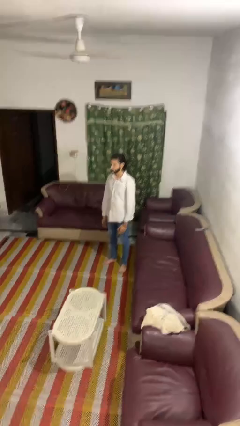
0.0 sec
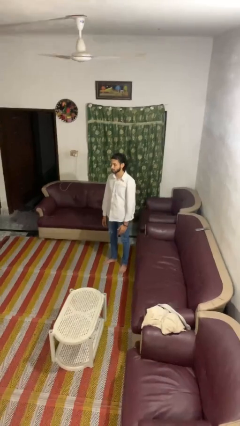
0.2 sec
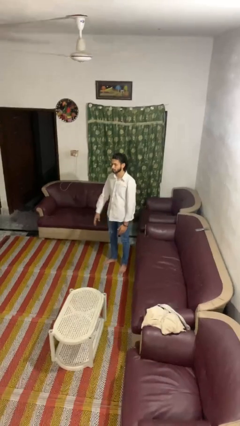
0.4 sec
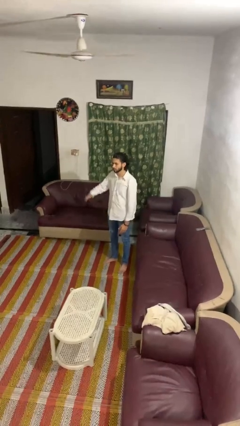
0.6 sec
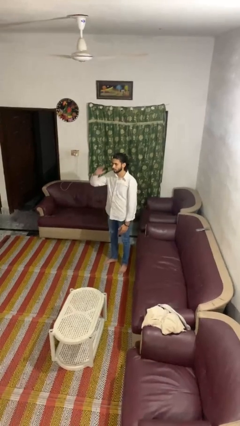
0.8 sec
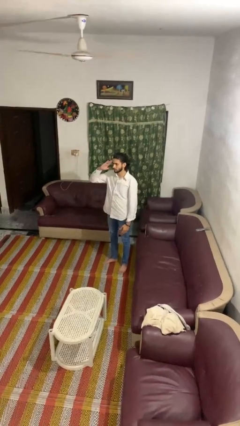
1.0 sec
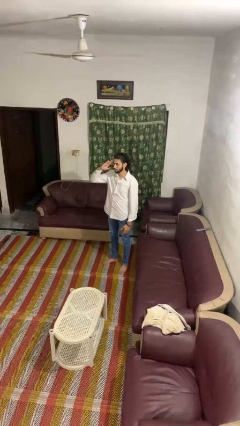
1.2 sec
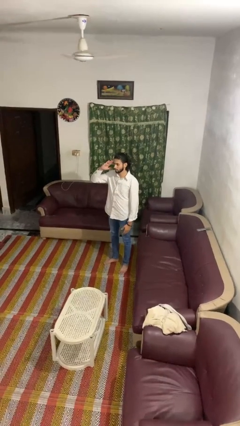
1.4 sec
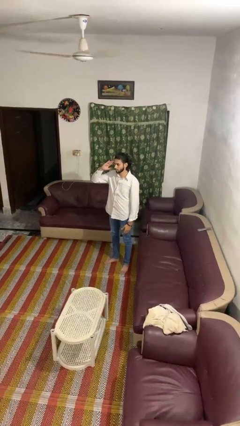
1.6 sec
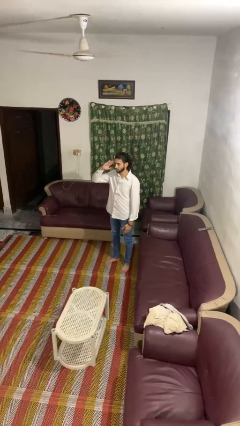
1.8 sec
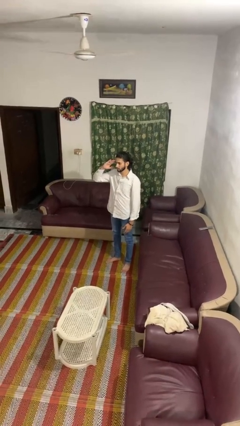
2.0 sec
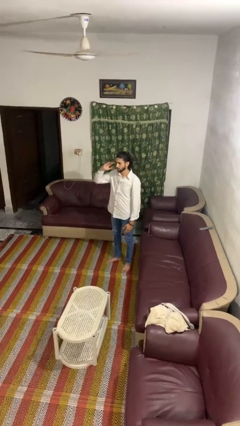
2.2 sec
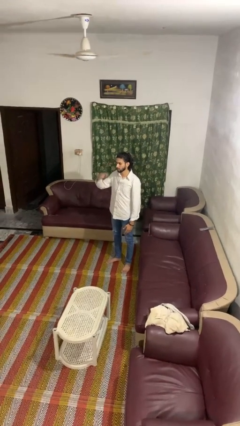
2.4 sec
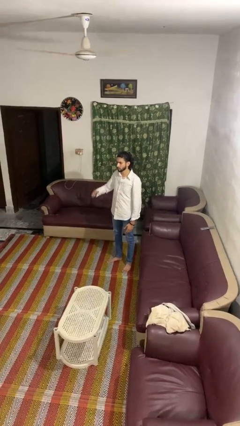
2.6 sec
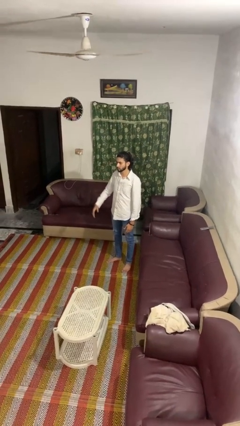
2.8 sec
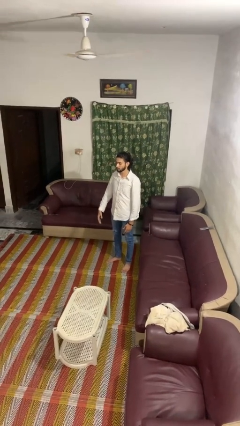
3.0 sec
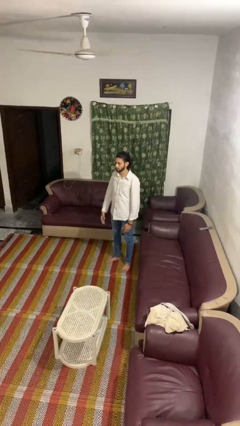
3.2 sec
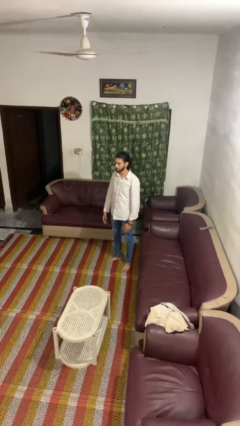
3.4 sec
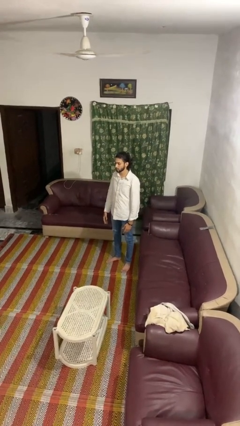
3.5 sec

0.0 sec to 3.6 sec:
person salutes

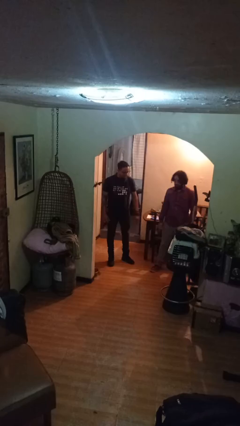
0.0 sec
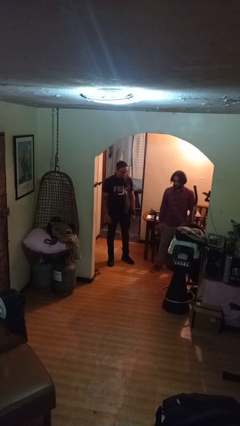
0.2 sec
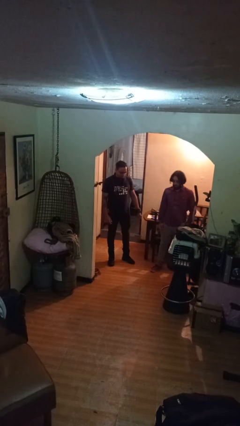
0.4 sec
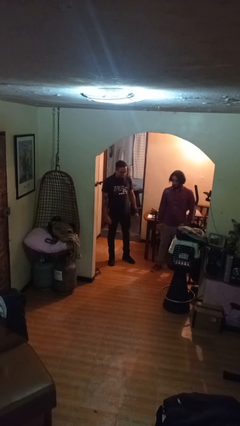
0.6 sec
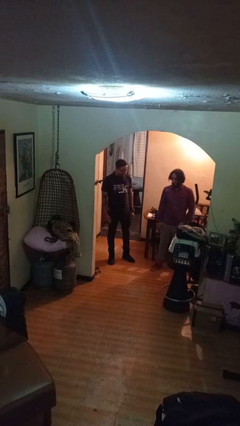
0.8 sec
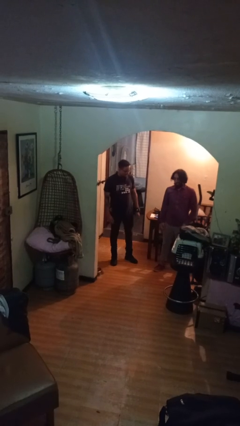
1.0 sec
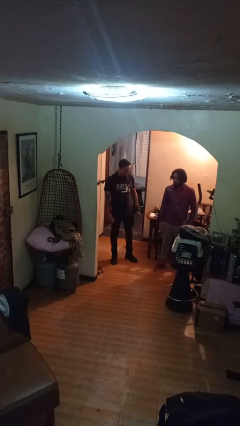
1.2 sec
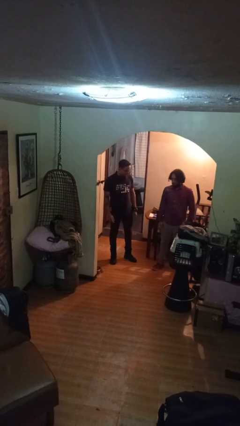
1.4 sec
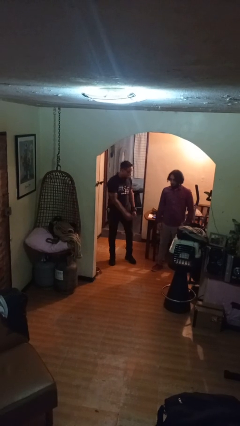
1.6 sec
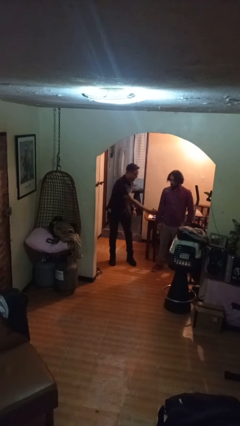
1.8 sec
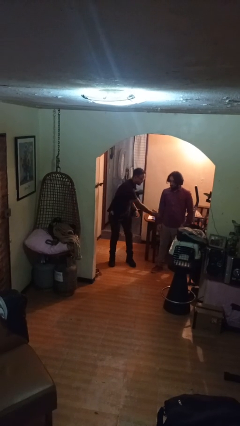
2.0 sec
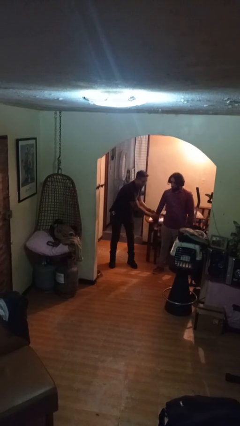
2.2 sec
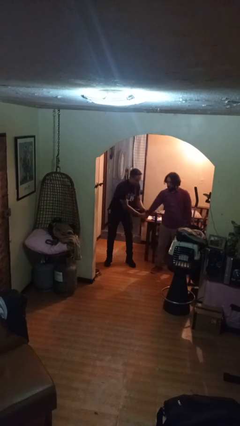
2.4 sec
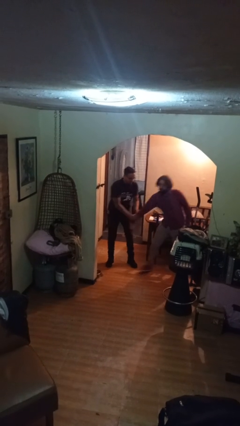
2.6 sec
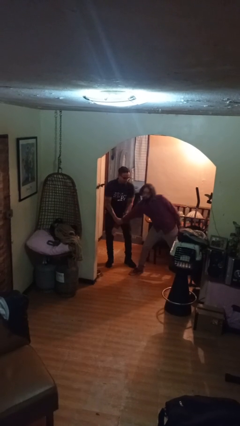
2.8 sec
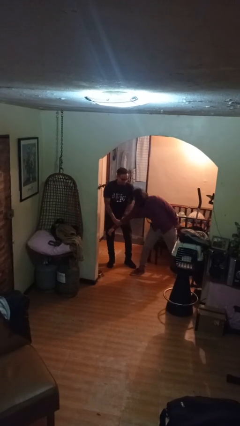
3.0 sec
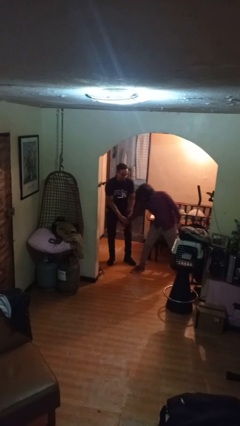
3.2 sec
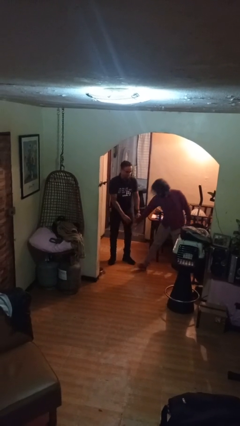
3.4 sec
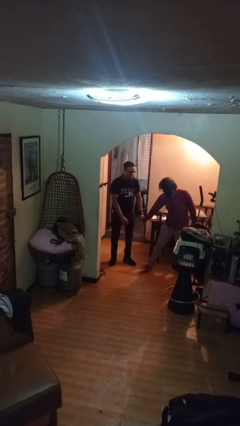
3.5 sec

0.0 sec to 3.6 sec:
person grabs person by forearm

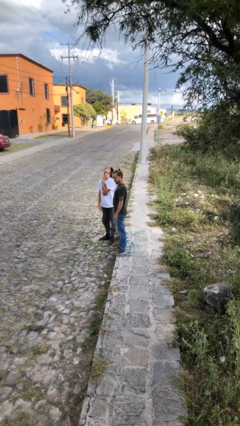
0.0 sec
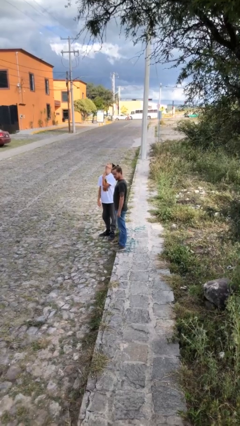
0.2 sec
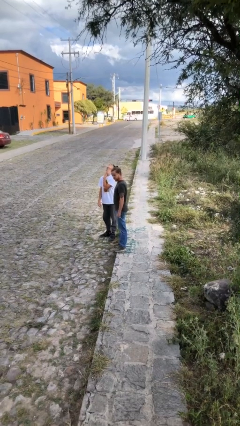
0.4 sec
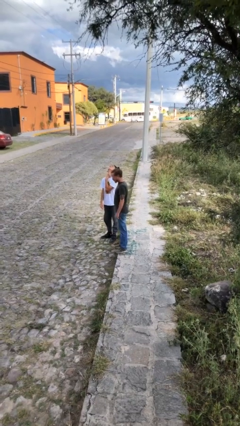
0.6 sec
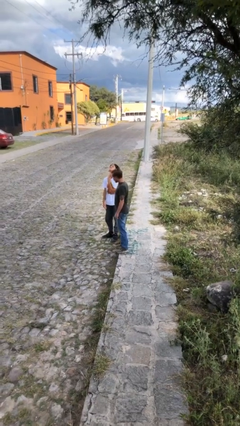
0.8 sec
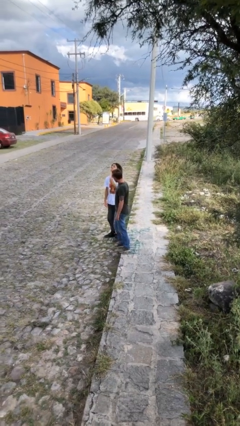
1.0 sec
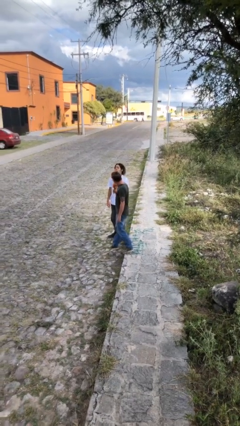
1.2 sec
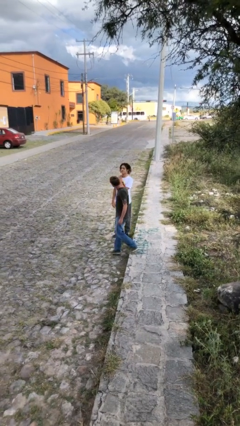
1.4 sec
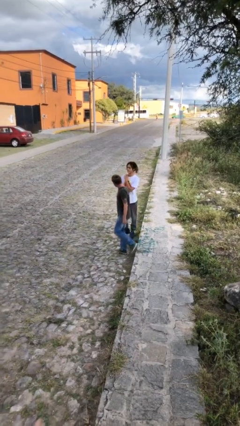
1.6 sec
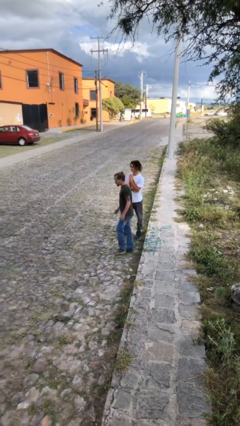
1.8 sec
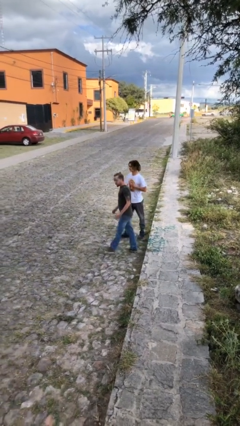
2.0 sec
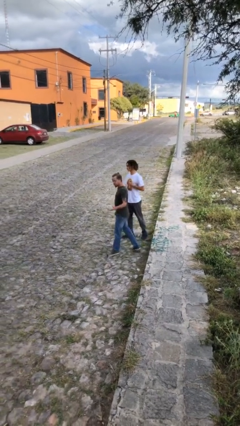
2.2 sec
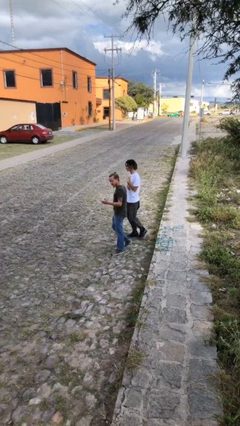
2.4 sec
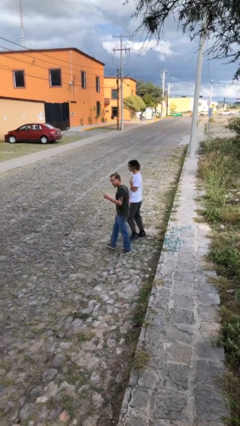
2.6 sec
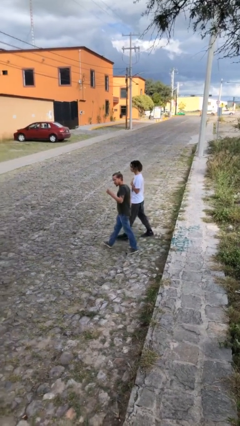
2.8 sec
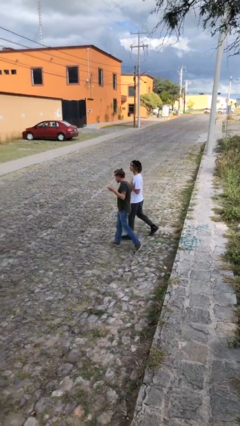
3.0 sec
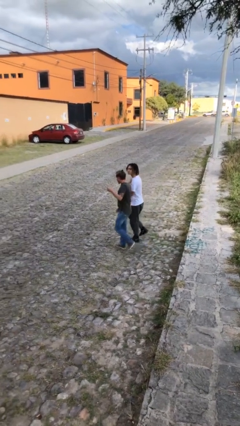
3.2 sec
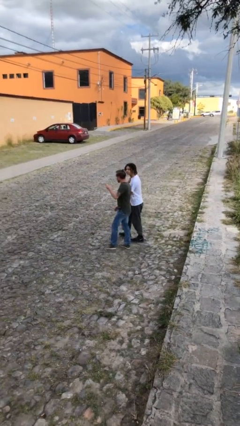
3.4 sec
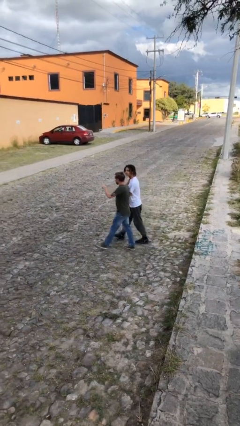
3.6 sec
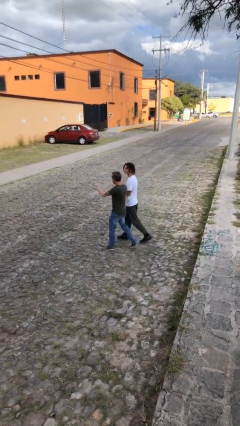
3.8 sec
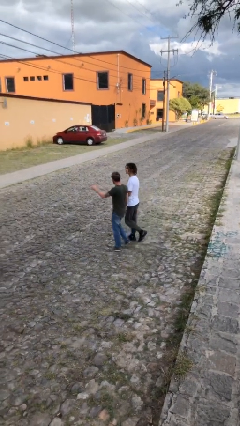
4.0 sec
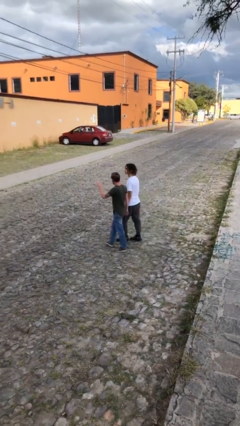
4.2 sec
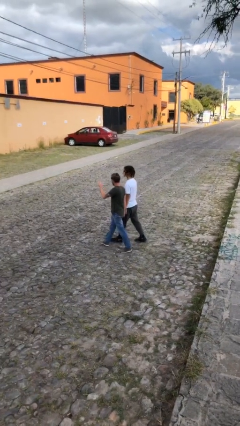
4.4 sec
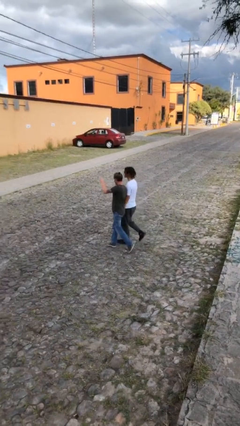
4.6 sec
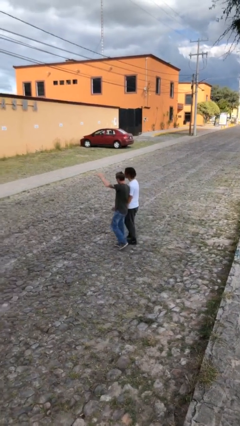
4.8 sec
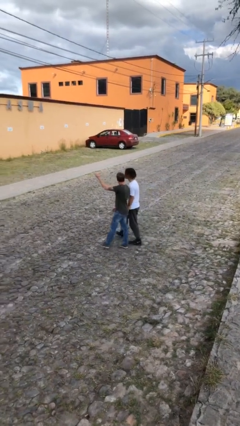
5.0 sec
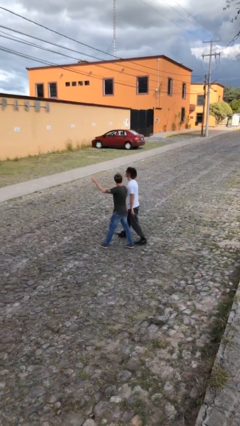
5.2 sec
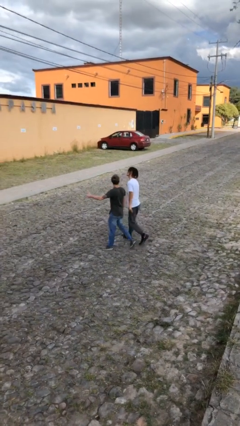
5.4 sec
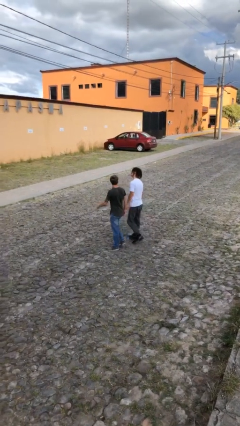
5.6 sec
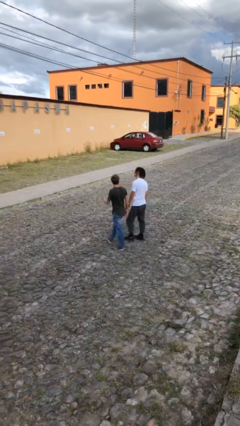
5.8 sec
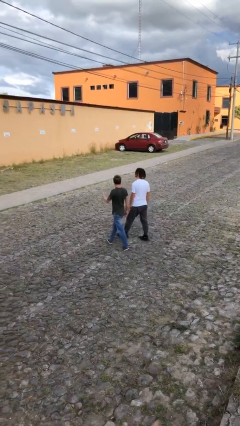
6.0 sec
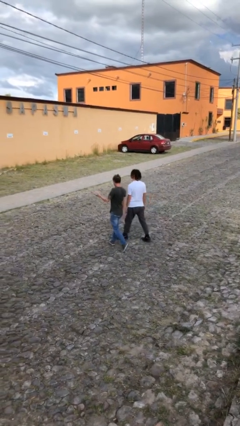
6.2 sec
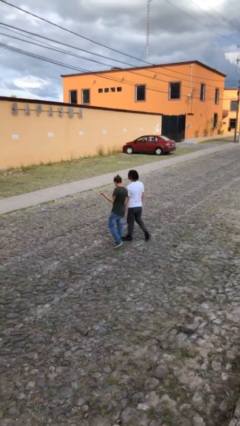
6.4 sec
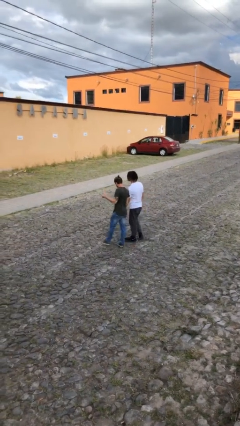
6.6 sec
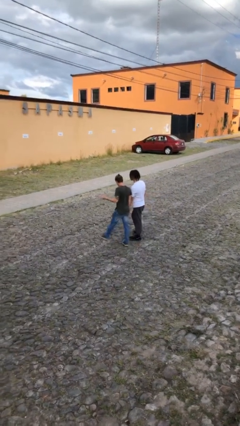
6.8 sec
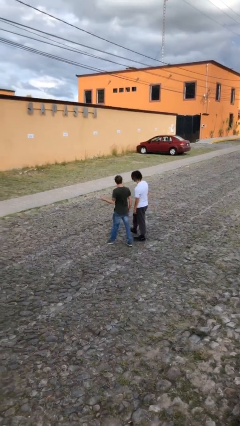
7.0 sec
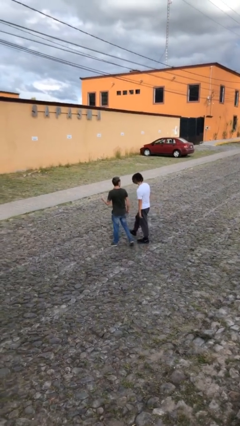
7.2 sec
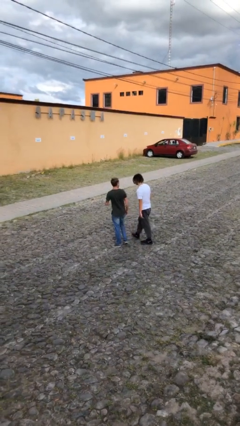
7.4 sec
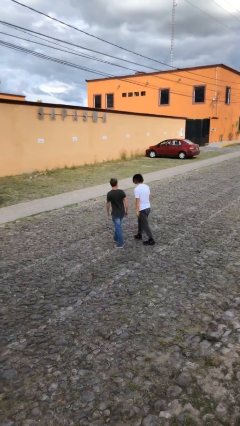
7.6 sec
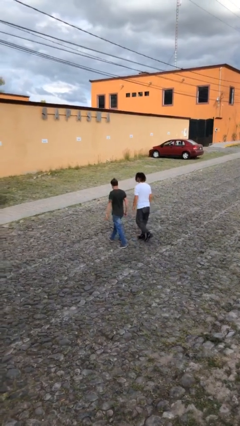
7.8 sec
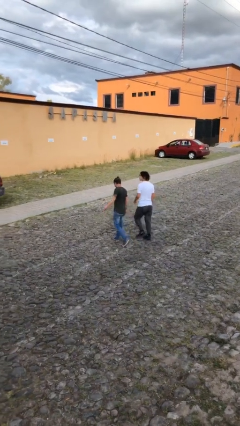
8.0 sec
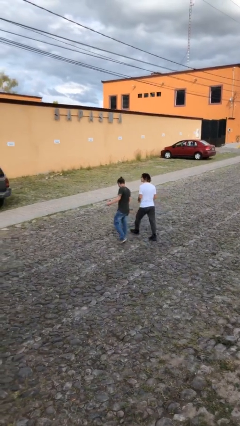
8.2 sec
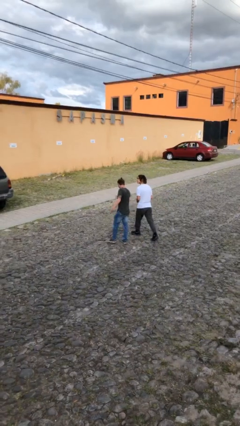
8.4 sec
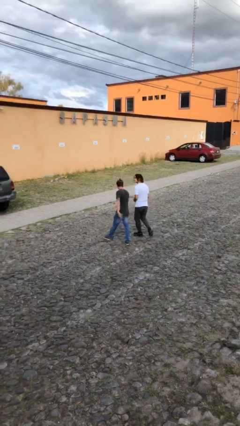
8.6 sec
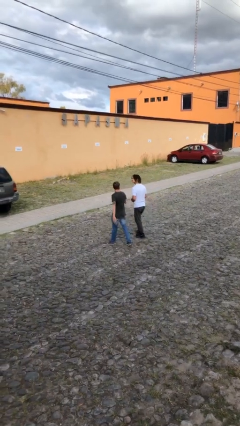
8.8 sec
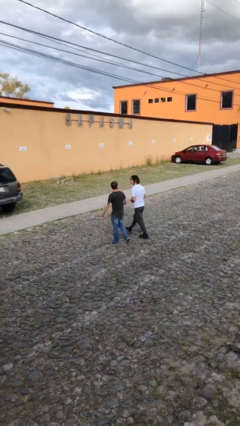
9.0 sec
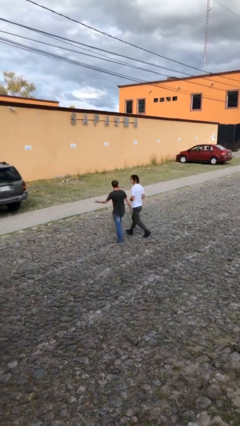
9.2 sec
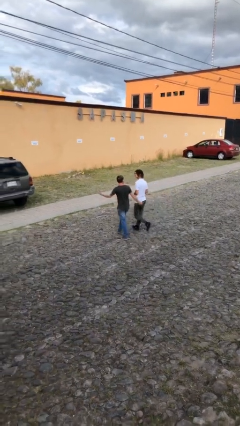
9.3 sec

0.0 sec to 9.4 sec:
person talks to person

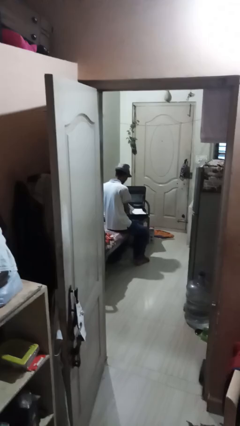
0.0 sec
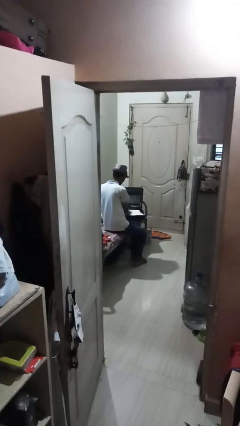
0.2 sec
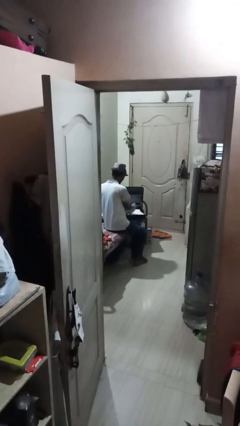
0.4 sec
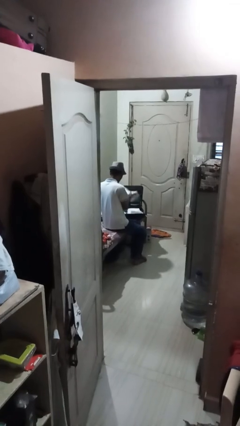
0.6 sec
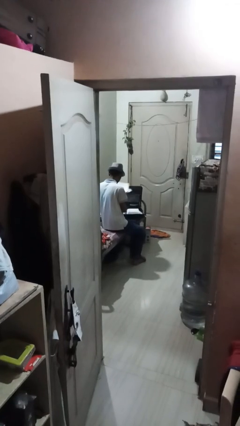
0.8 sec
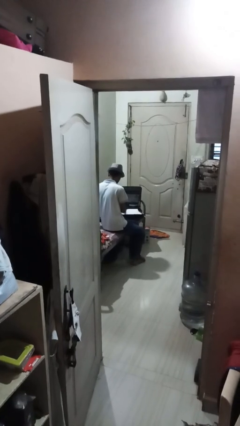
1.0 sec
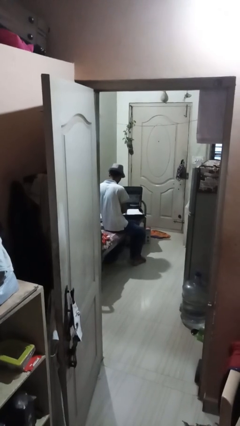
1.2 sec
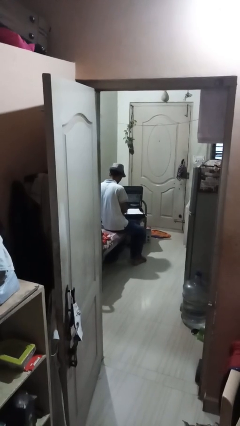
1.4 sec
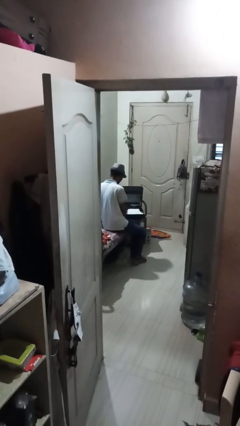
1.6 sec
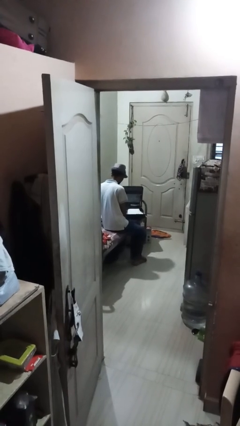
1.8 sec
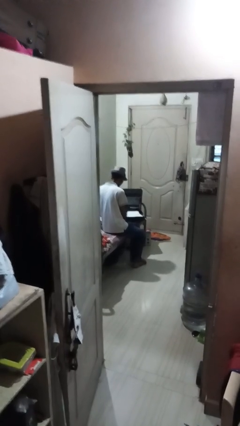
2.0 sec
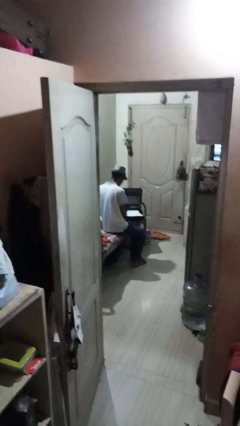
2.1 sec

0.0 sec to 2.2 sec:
person unloads clothes from suitcase
